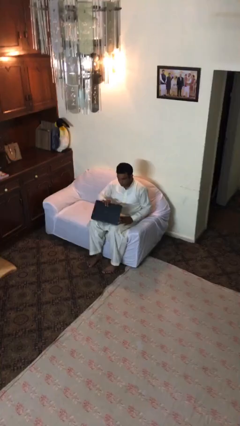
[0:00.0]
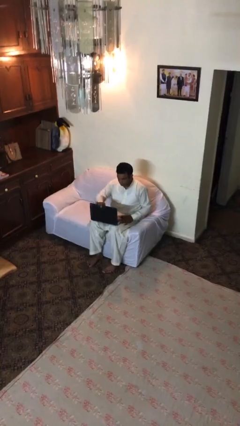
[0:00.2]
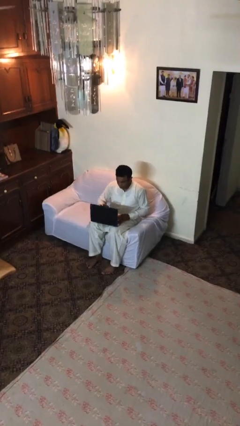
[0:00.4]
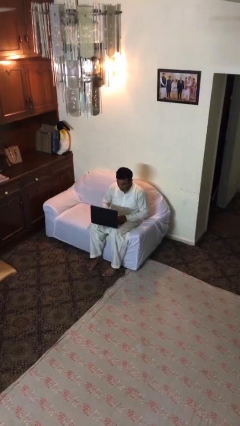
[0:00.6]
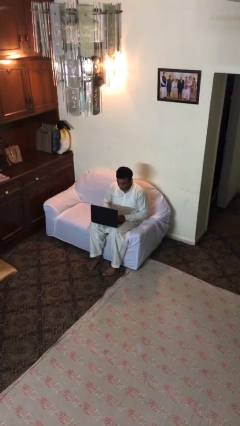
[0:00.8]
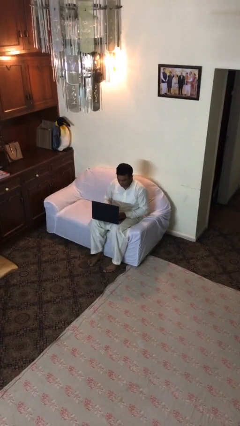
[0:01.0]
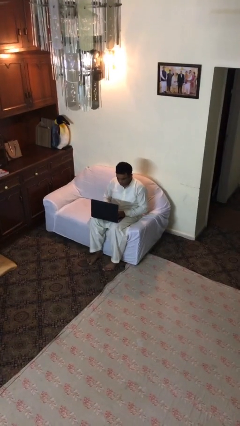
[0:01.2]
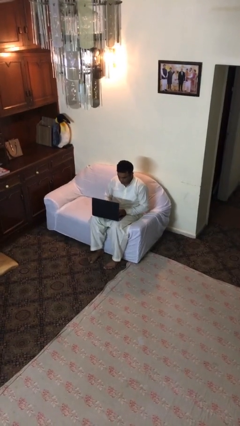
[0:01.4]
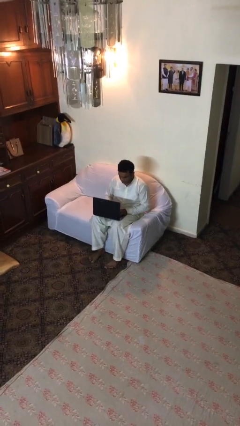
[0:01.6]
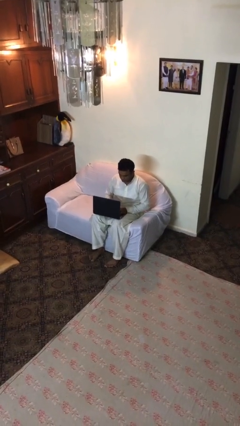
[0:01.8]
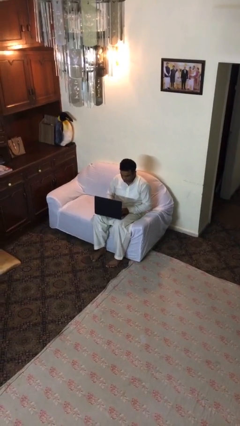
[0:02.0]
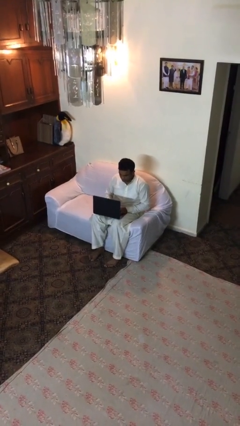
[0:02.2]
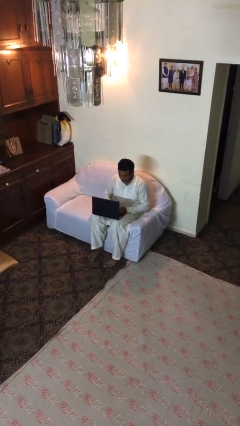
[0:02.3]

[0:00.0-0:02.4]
person interacts with laptop

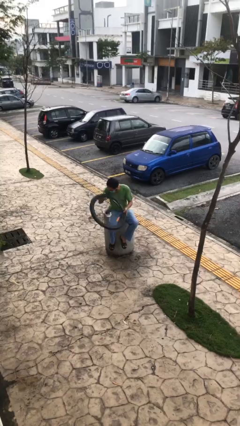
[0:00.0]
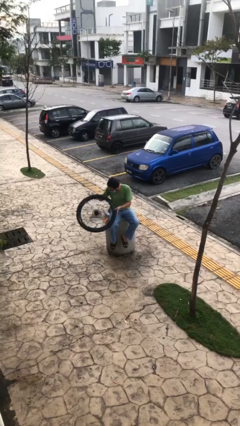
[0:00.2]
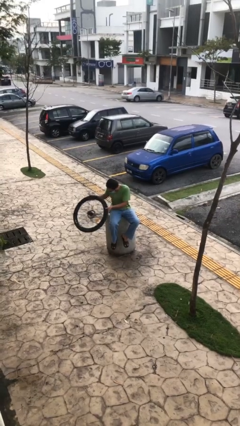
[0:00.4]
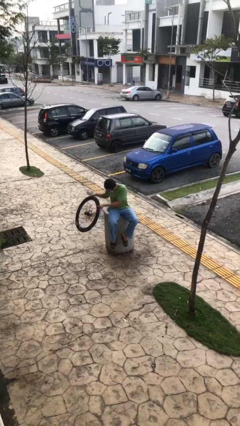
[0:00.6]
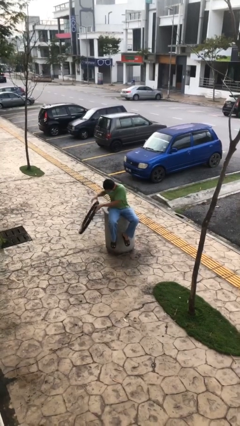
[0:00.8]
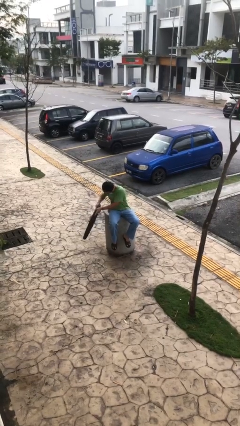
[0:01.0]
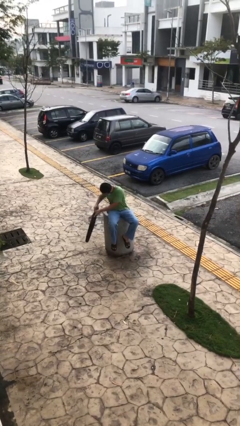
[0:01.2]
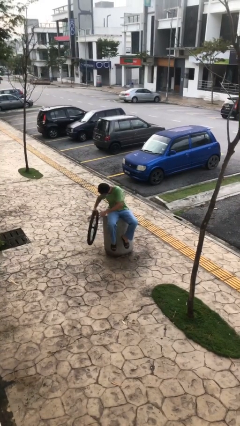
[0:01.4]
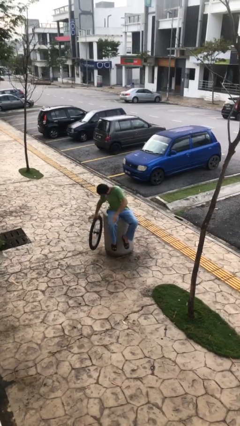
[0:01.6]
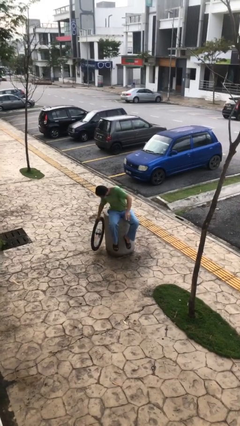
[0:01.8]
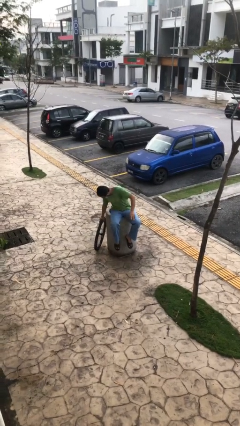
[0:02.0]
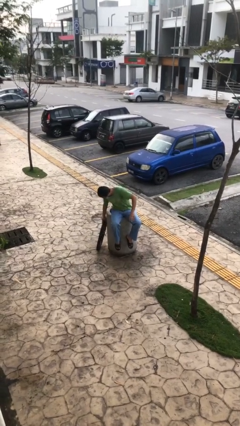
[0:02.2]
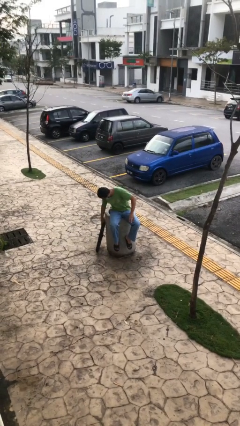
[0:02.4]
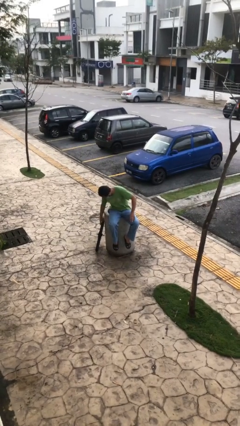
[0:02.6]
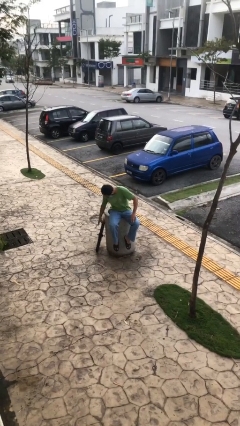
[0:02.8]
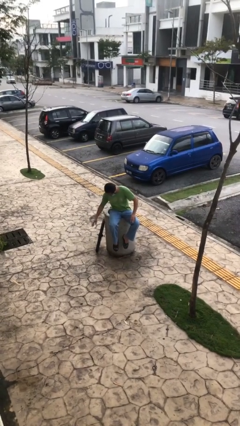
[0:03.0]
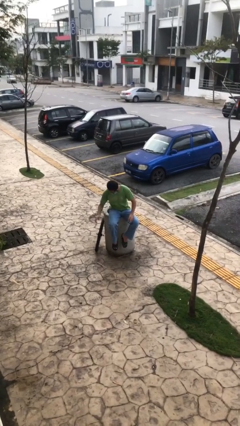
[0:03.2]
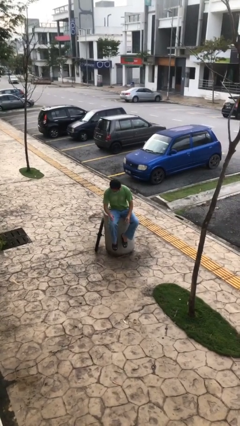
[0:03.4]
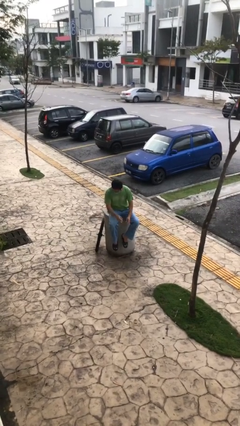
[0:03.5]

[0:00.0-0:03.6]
person puts down object on floor

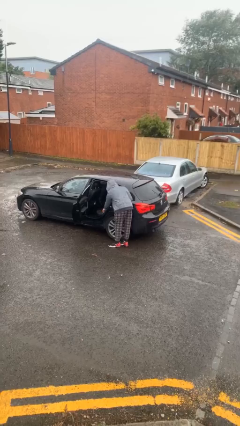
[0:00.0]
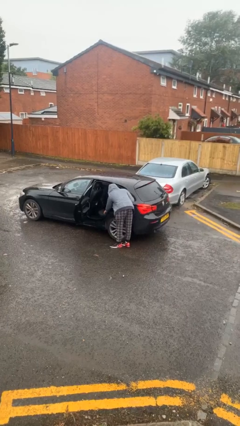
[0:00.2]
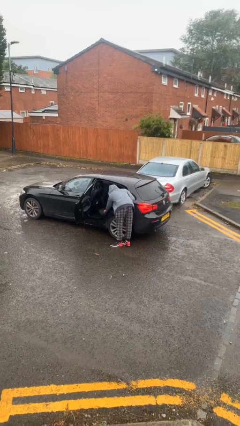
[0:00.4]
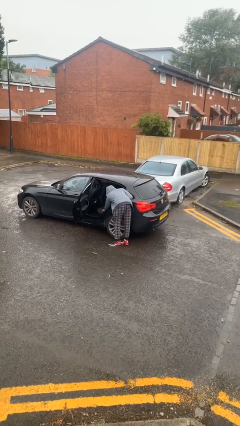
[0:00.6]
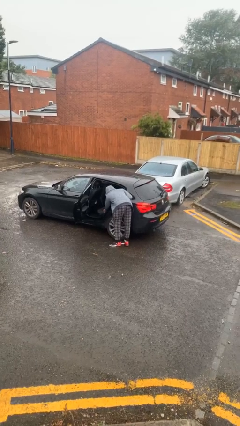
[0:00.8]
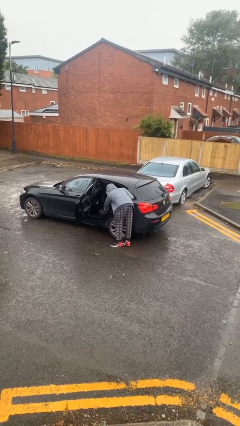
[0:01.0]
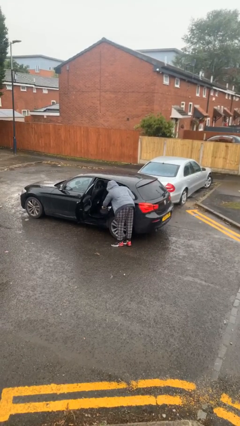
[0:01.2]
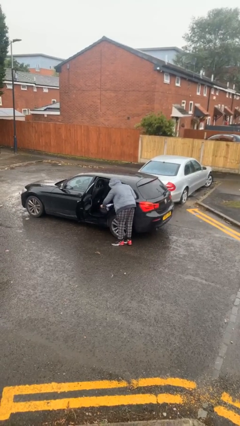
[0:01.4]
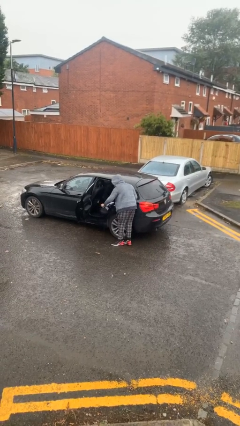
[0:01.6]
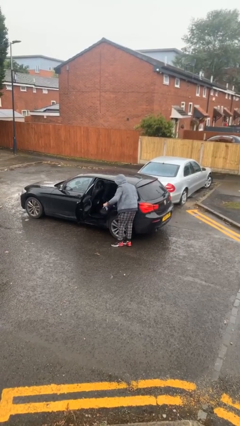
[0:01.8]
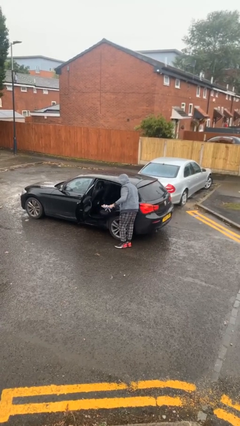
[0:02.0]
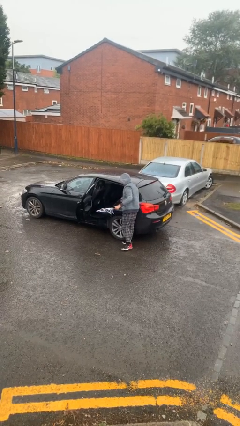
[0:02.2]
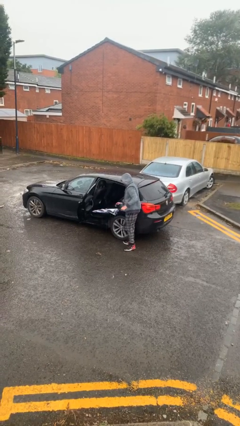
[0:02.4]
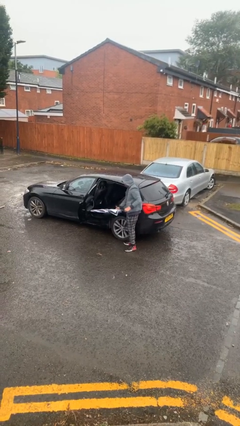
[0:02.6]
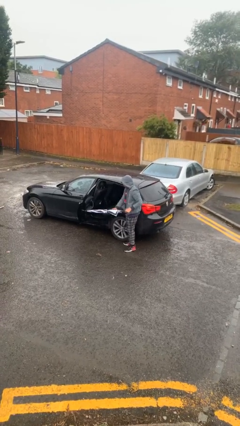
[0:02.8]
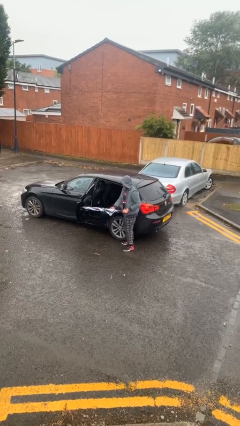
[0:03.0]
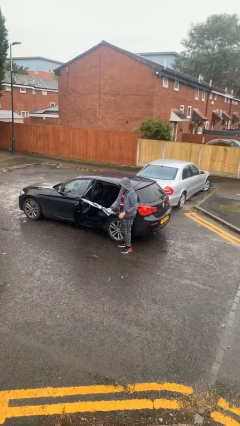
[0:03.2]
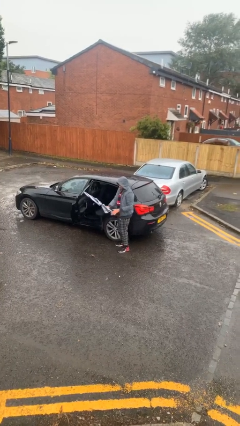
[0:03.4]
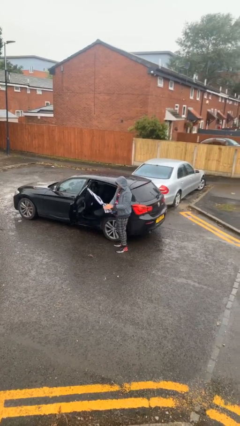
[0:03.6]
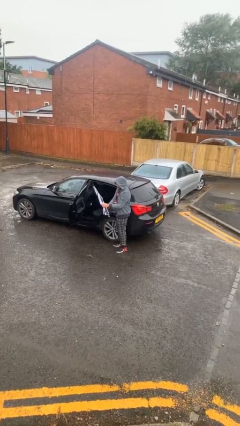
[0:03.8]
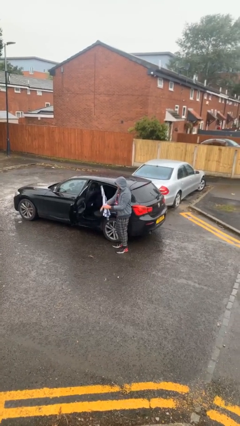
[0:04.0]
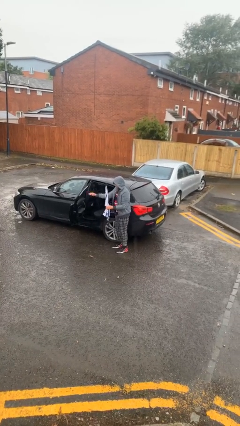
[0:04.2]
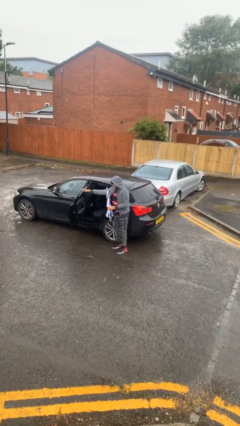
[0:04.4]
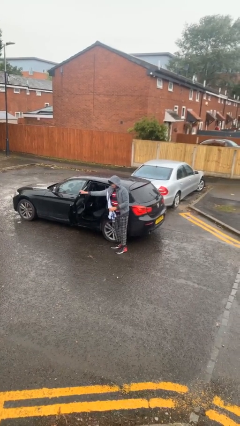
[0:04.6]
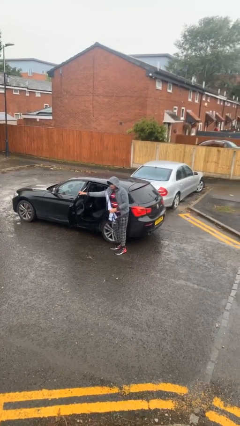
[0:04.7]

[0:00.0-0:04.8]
person unloads car

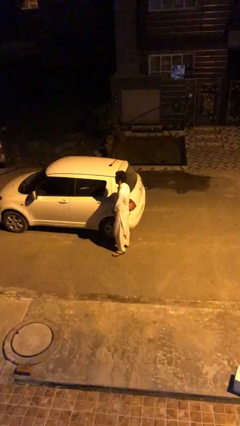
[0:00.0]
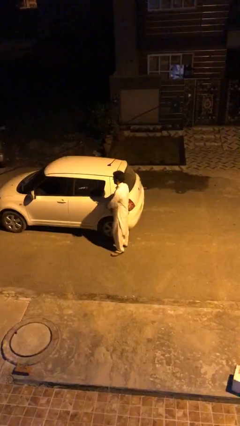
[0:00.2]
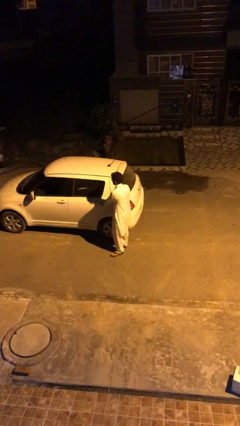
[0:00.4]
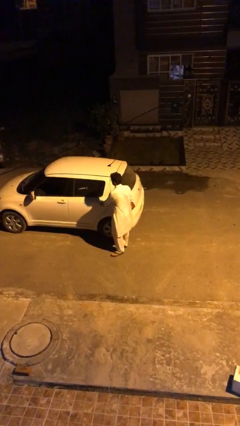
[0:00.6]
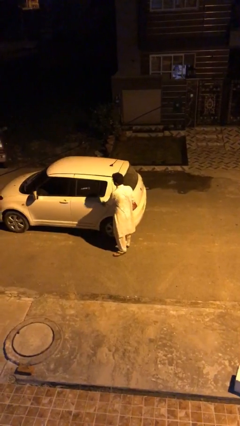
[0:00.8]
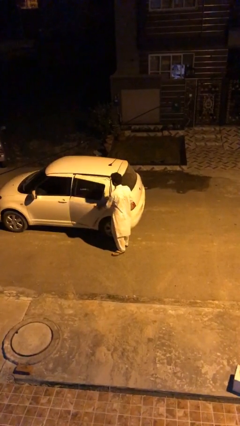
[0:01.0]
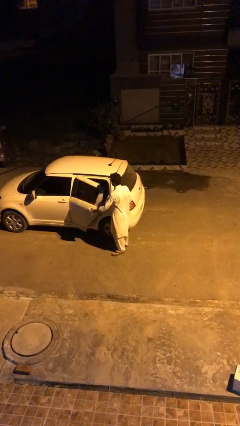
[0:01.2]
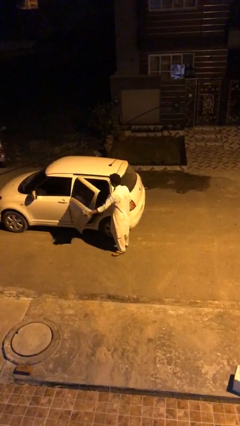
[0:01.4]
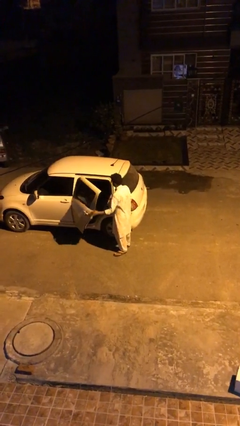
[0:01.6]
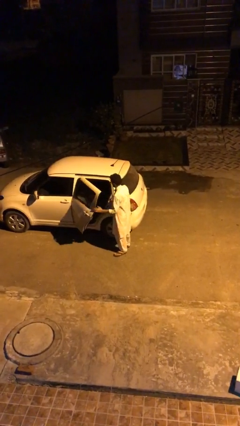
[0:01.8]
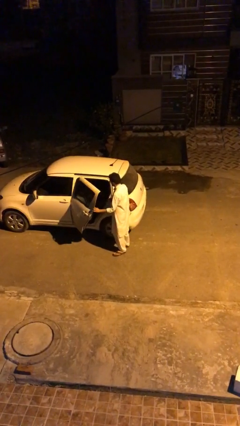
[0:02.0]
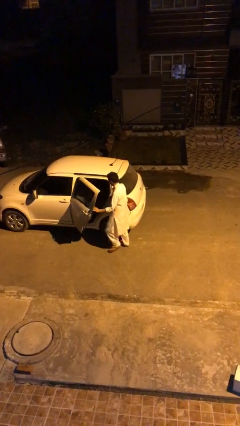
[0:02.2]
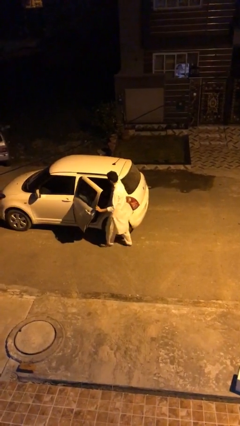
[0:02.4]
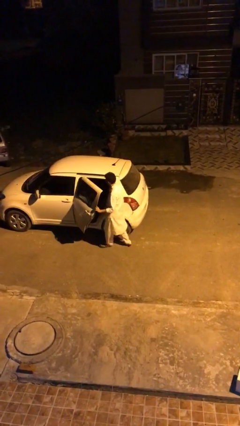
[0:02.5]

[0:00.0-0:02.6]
person opens car door

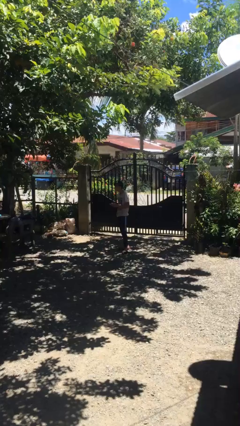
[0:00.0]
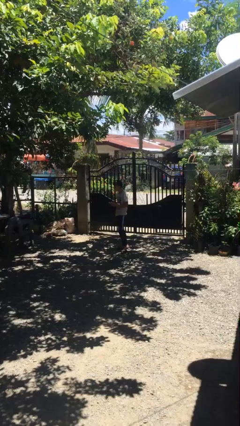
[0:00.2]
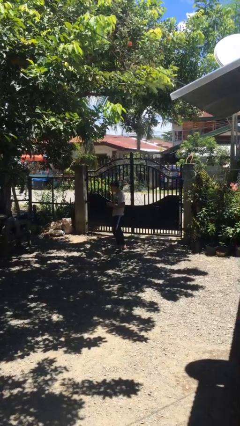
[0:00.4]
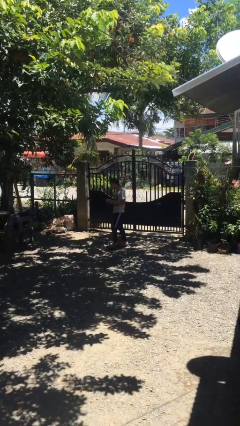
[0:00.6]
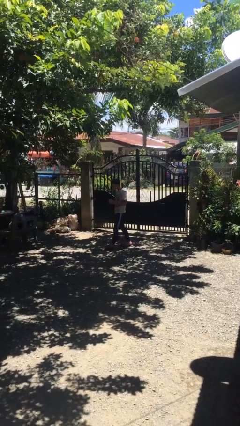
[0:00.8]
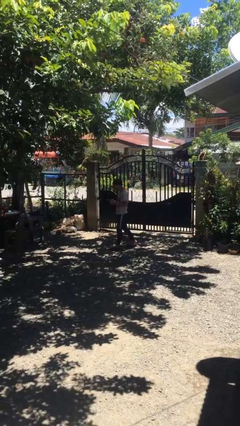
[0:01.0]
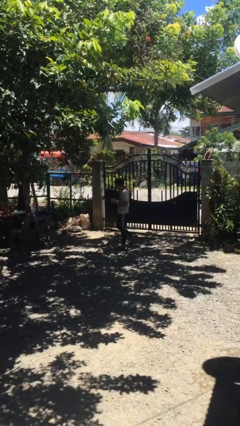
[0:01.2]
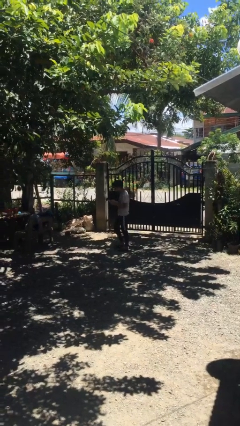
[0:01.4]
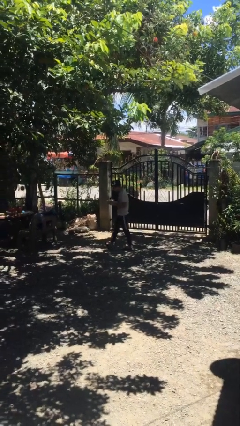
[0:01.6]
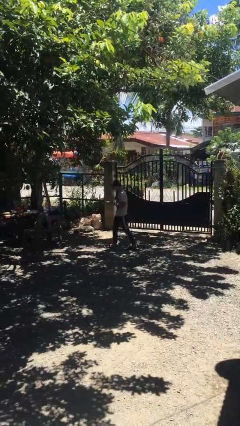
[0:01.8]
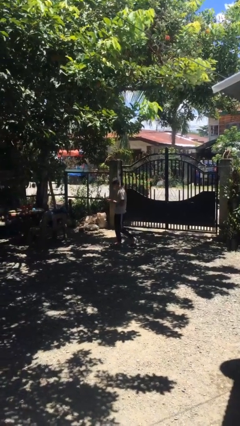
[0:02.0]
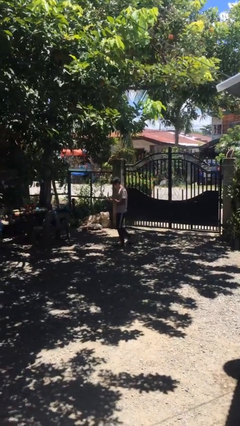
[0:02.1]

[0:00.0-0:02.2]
person texts on phone

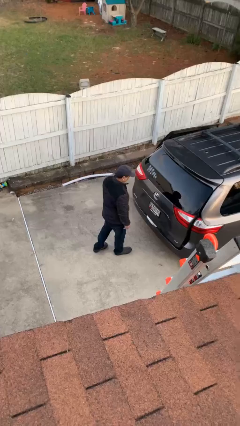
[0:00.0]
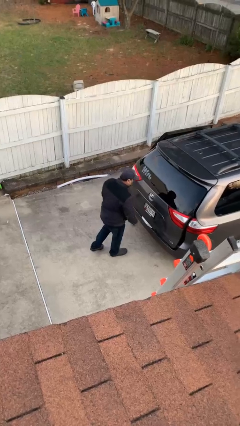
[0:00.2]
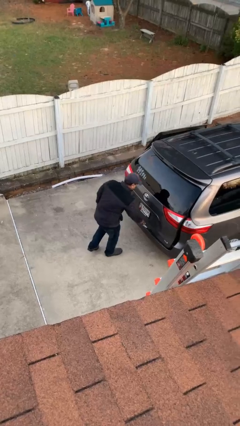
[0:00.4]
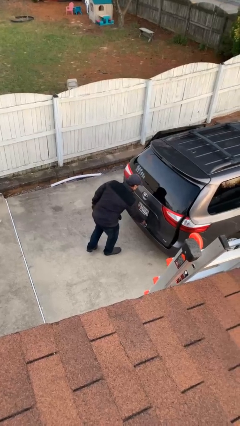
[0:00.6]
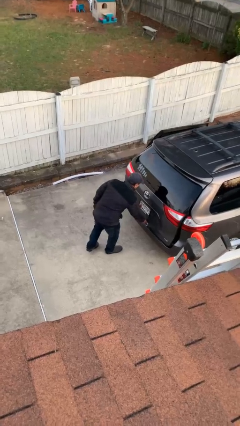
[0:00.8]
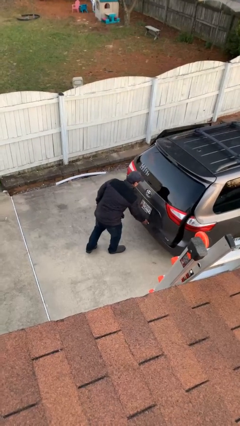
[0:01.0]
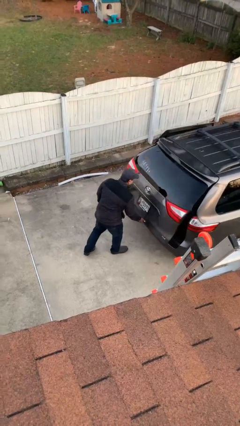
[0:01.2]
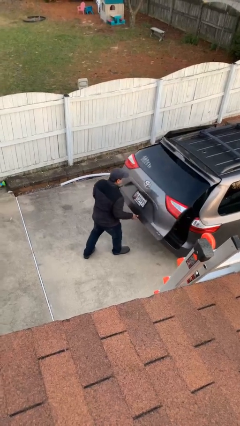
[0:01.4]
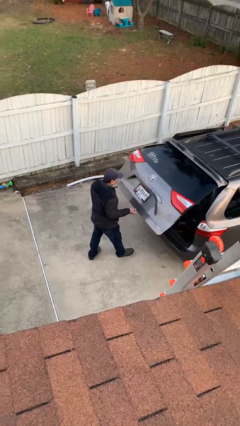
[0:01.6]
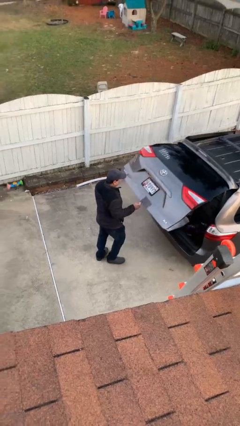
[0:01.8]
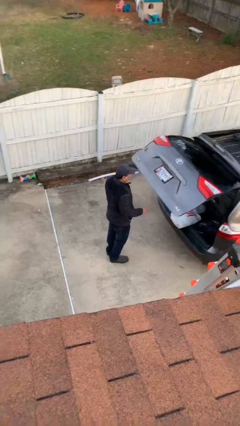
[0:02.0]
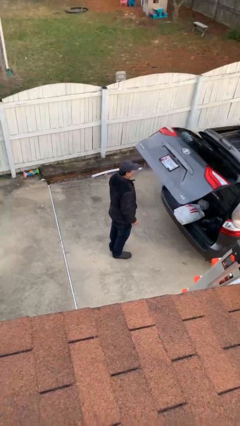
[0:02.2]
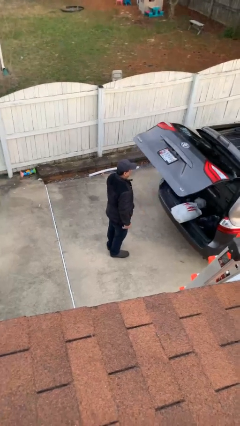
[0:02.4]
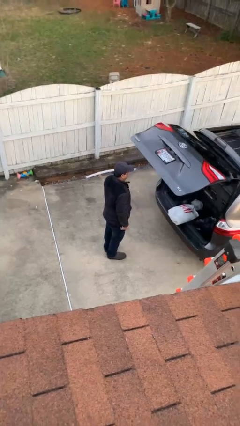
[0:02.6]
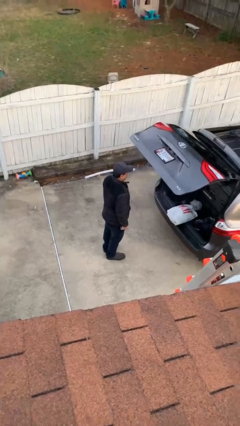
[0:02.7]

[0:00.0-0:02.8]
person opens car trunk
